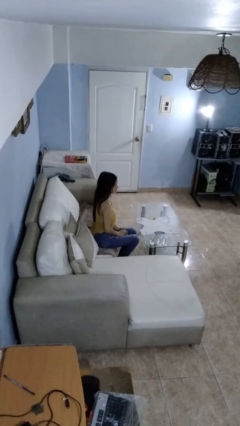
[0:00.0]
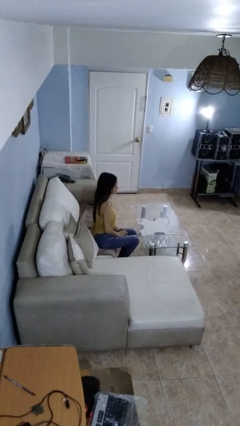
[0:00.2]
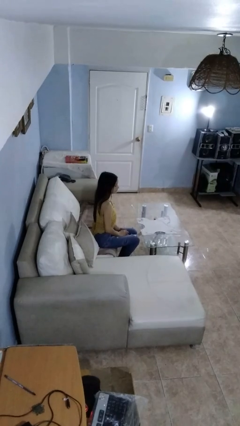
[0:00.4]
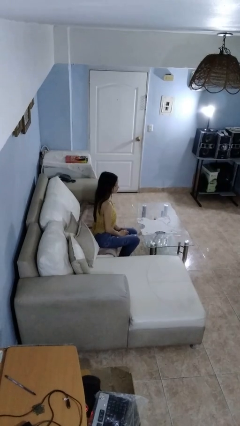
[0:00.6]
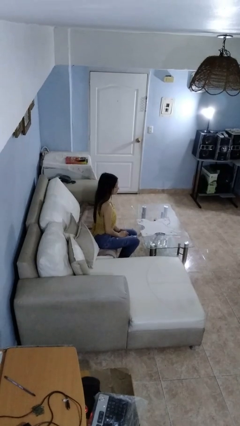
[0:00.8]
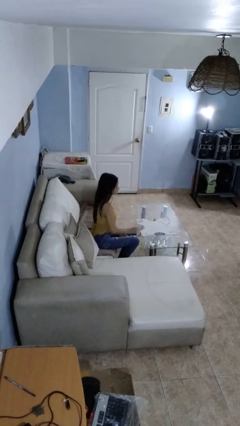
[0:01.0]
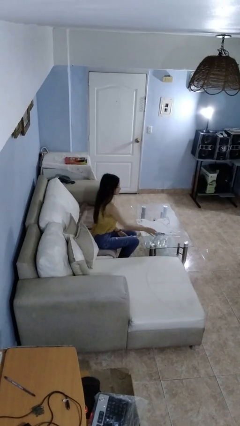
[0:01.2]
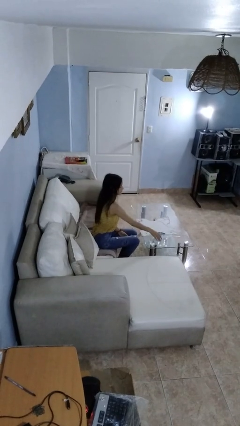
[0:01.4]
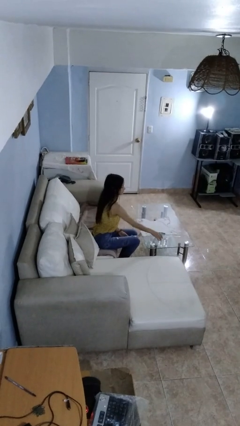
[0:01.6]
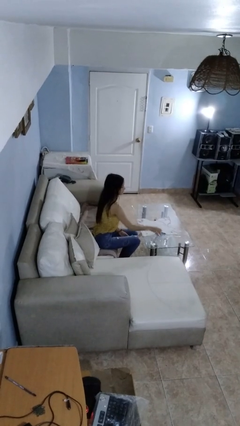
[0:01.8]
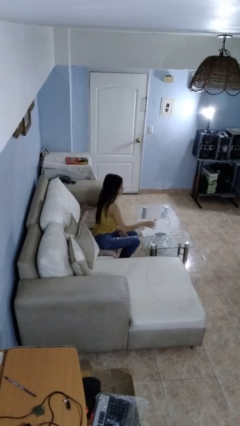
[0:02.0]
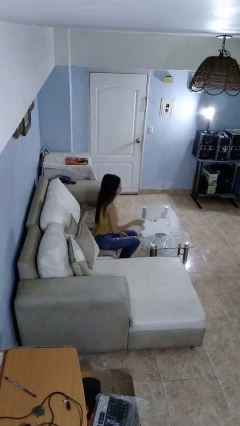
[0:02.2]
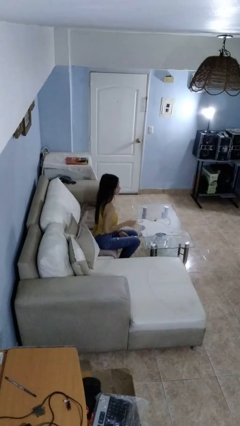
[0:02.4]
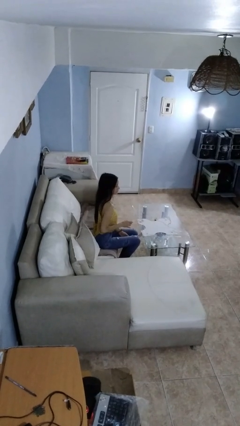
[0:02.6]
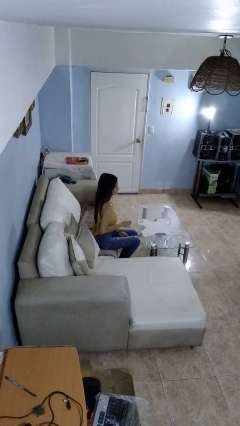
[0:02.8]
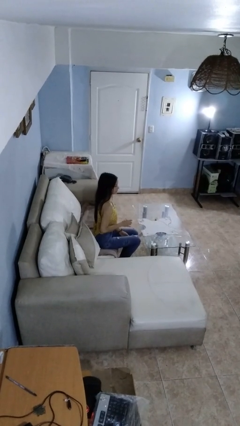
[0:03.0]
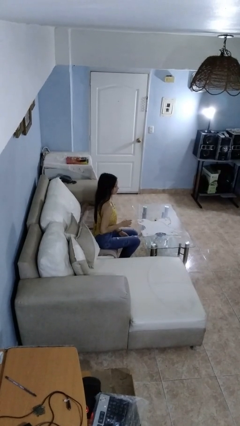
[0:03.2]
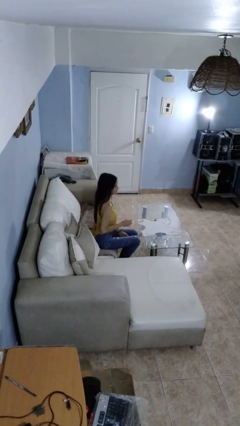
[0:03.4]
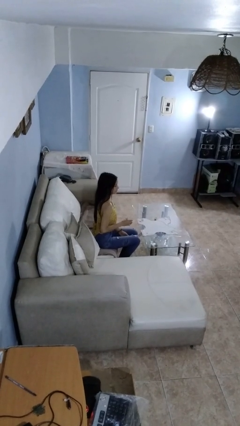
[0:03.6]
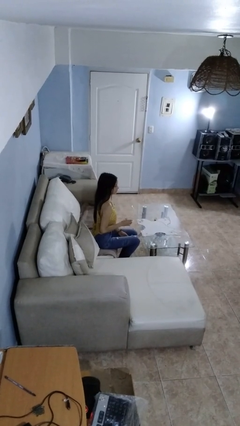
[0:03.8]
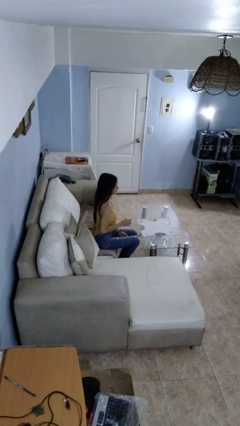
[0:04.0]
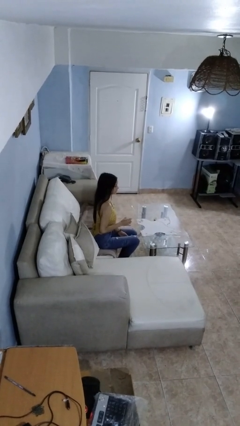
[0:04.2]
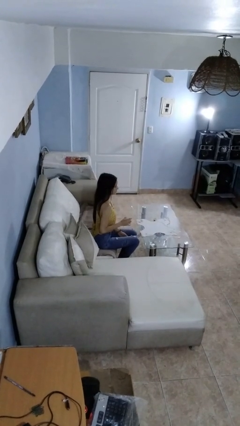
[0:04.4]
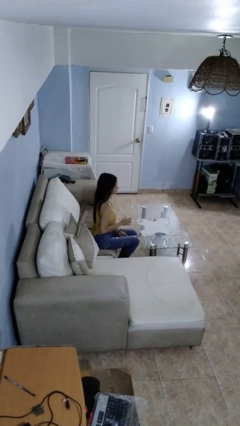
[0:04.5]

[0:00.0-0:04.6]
person picks up object from table

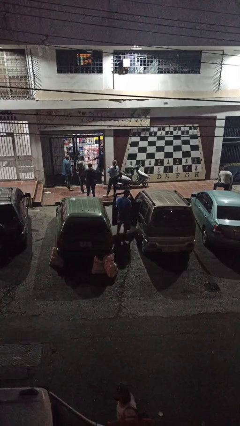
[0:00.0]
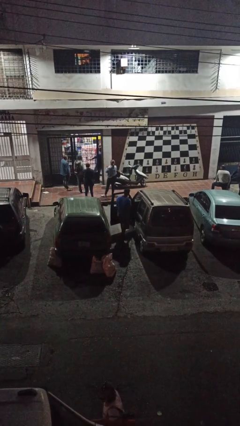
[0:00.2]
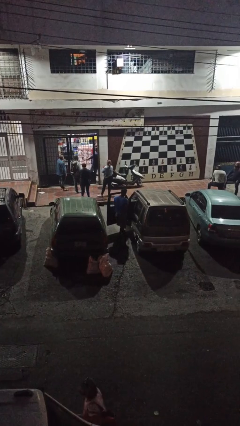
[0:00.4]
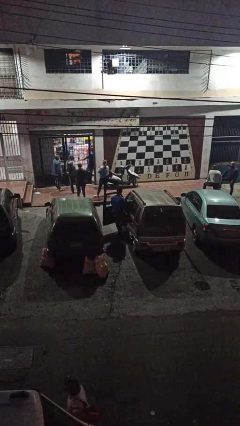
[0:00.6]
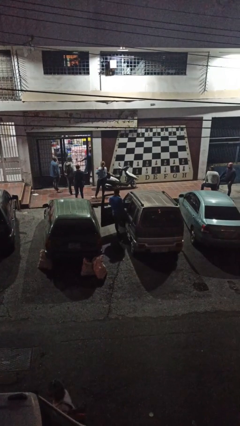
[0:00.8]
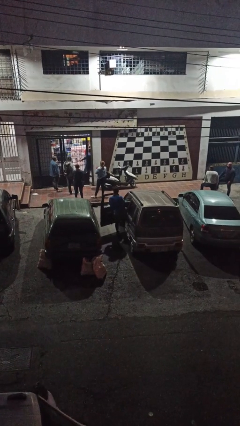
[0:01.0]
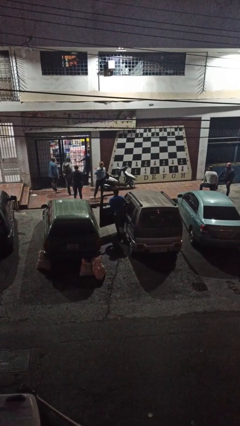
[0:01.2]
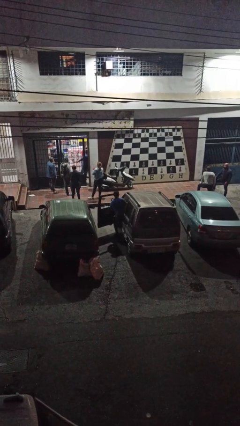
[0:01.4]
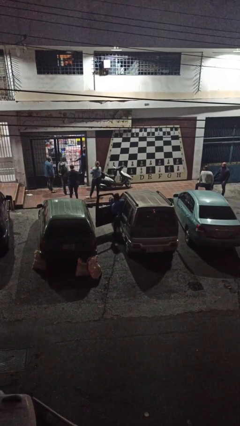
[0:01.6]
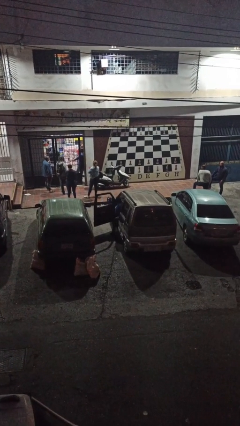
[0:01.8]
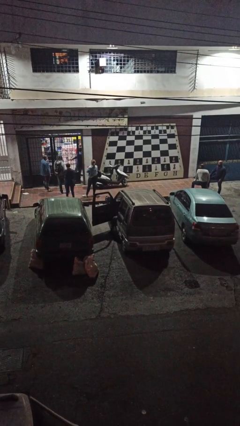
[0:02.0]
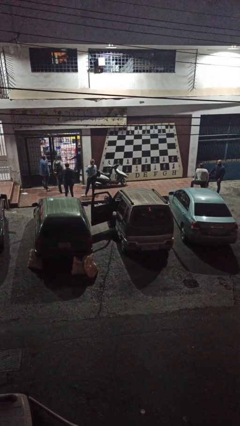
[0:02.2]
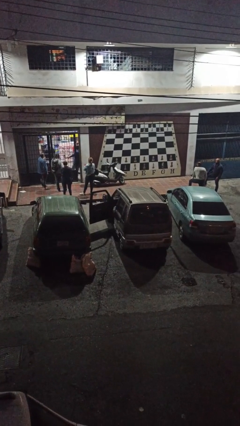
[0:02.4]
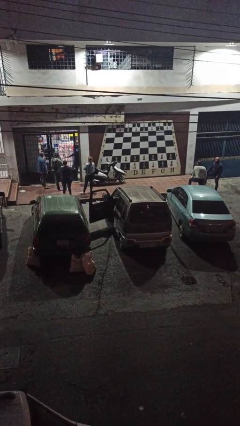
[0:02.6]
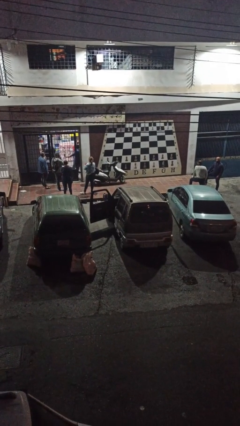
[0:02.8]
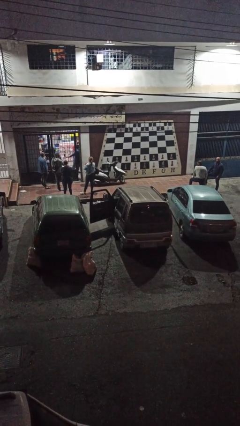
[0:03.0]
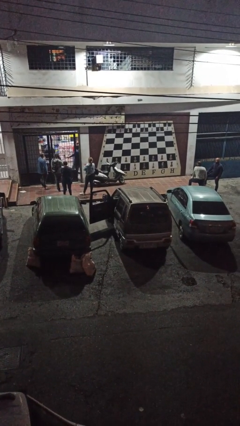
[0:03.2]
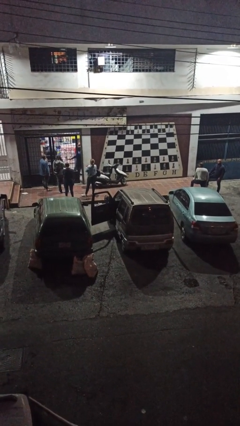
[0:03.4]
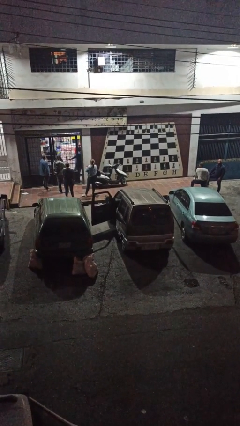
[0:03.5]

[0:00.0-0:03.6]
person enters car

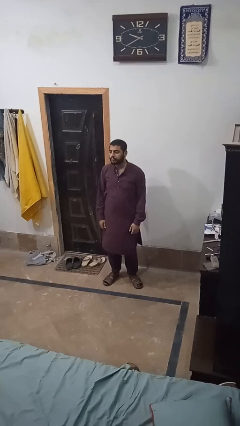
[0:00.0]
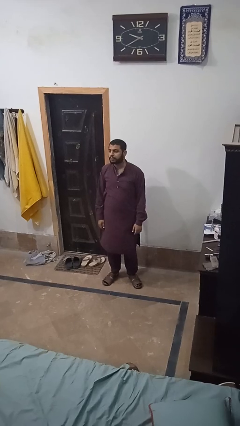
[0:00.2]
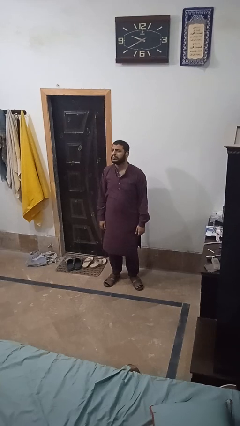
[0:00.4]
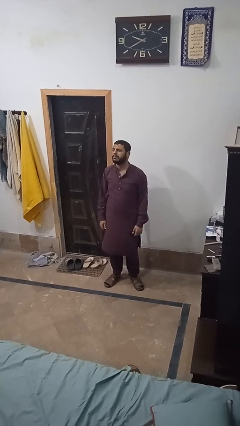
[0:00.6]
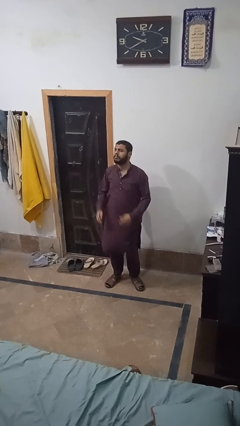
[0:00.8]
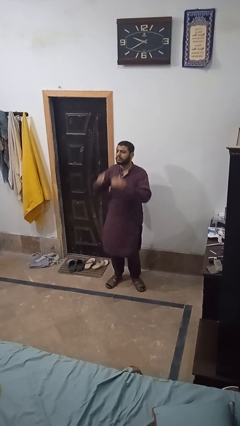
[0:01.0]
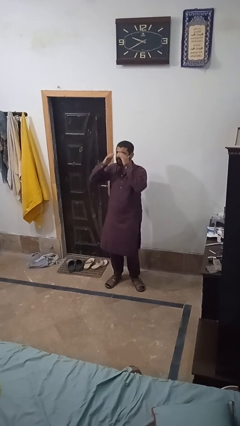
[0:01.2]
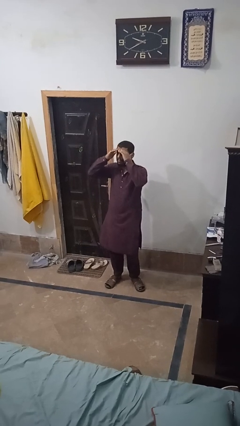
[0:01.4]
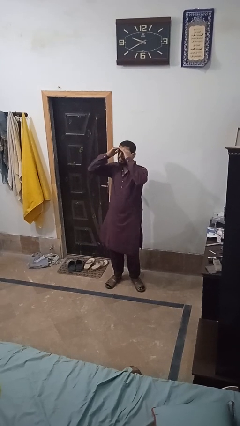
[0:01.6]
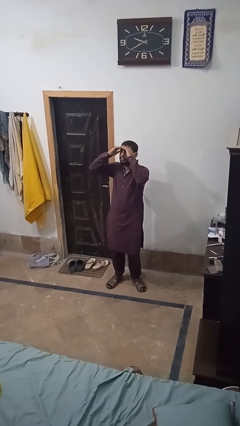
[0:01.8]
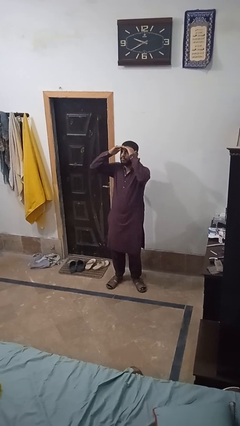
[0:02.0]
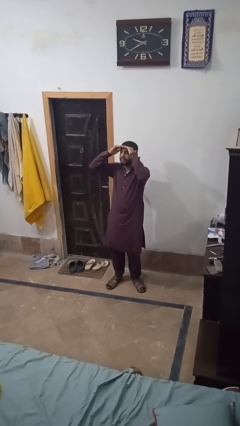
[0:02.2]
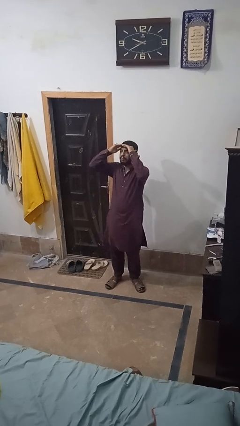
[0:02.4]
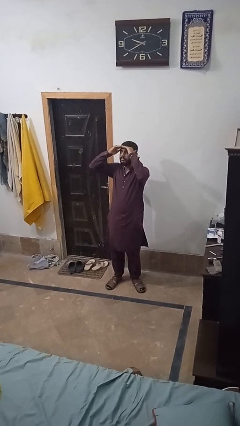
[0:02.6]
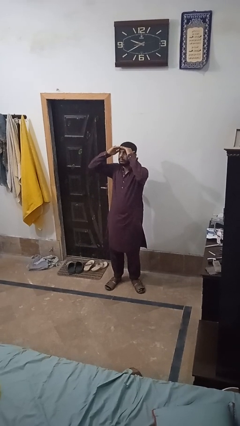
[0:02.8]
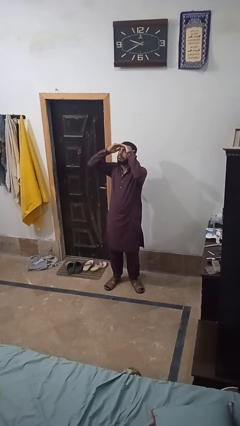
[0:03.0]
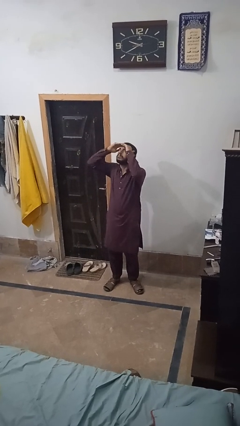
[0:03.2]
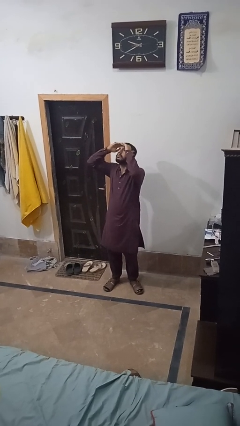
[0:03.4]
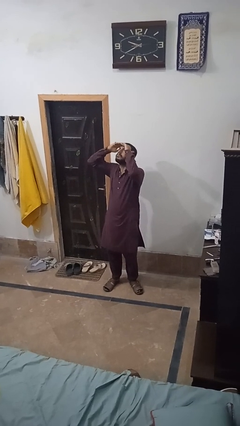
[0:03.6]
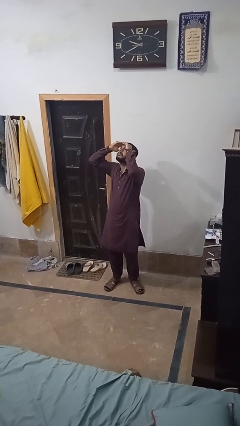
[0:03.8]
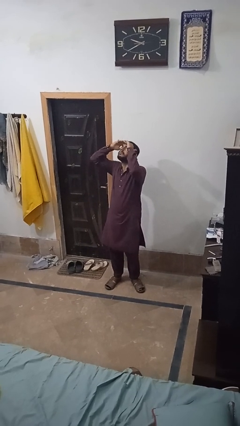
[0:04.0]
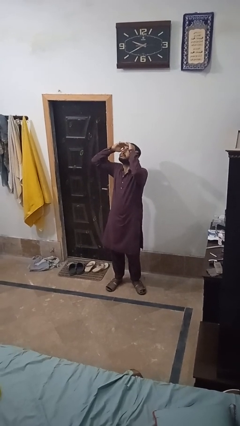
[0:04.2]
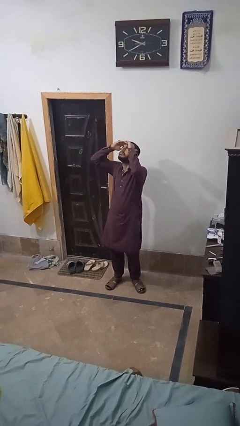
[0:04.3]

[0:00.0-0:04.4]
person shades eyes

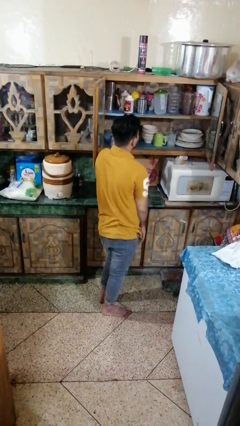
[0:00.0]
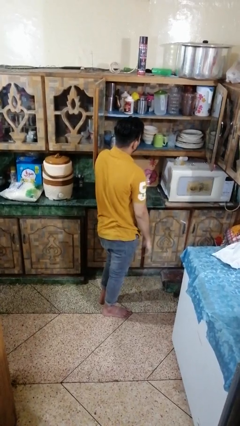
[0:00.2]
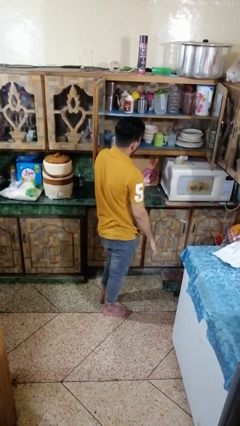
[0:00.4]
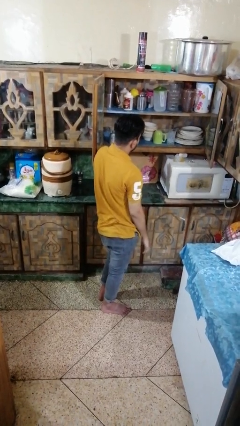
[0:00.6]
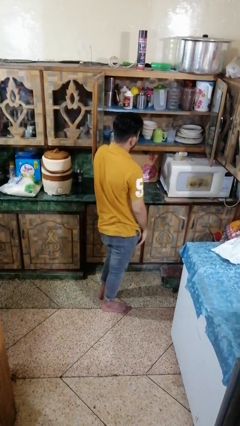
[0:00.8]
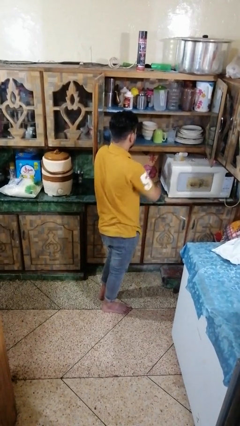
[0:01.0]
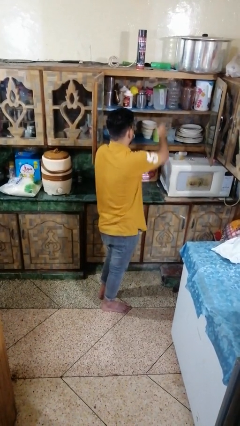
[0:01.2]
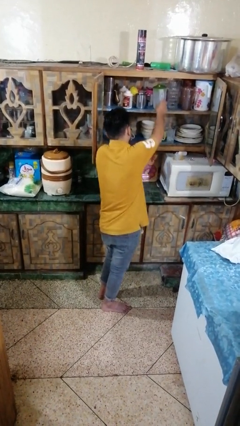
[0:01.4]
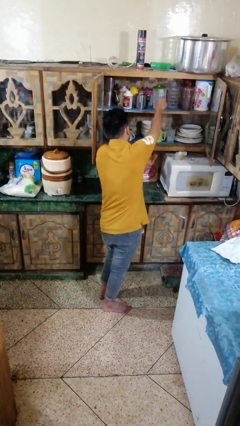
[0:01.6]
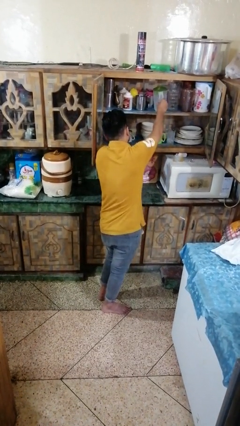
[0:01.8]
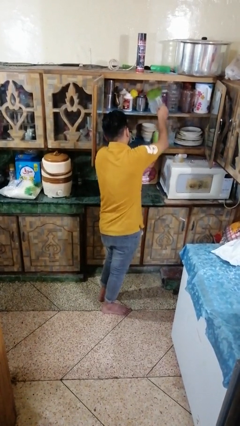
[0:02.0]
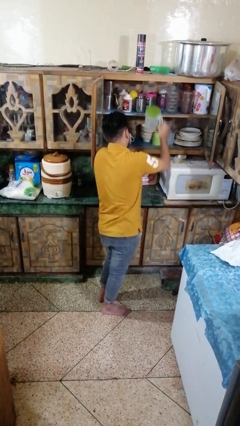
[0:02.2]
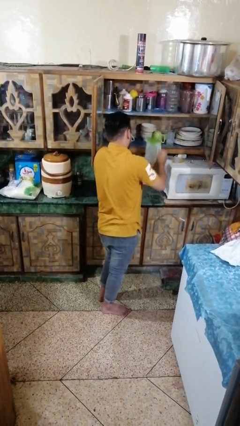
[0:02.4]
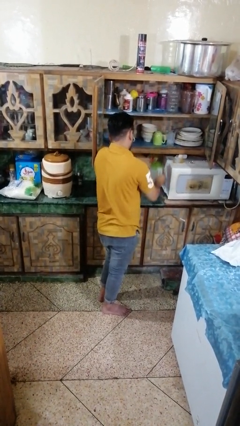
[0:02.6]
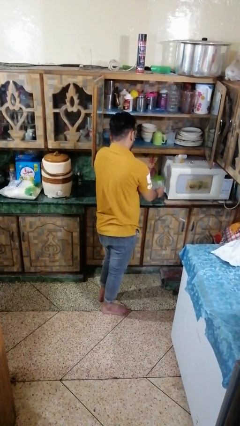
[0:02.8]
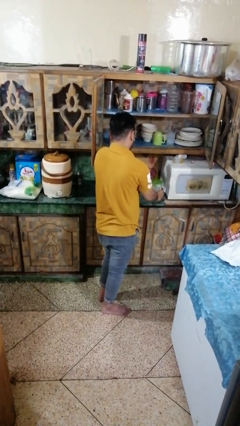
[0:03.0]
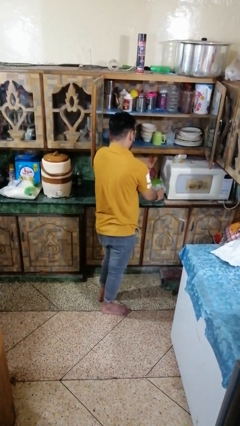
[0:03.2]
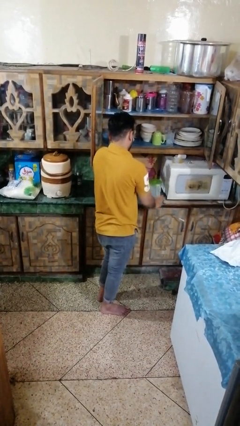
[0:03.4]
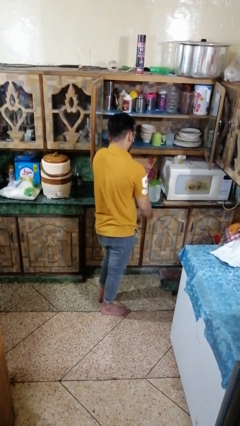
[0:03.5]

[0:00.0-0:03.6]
person takes object from cabinet

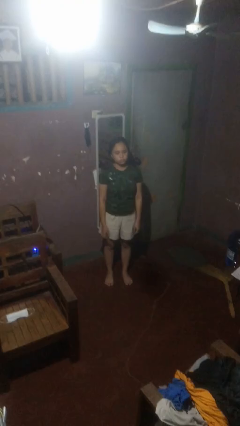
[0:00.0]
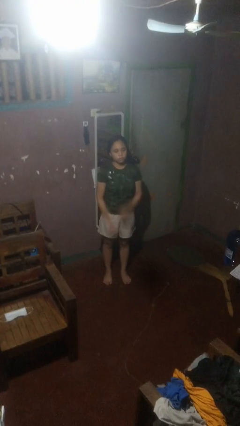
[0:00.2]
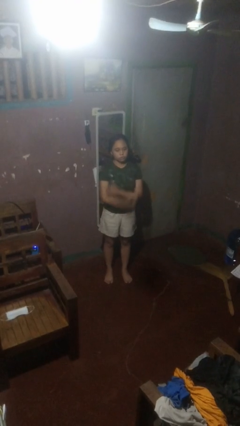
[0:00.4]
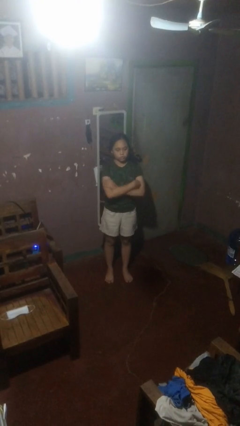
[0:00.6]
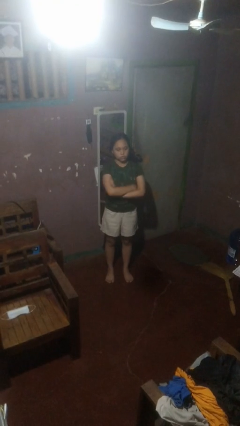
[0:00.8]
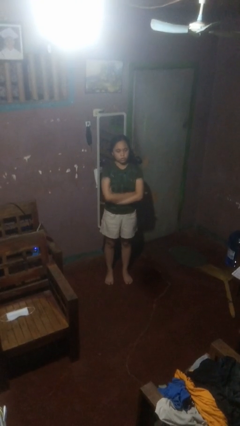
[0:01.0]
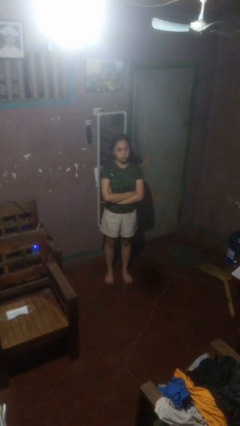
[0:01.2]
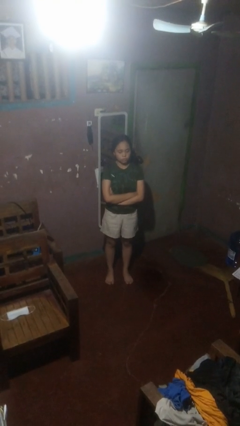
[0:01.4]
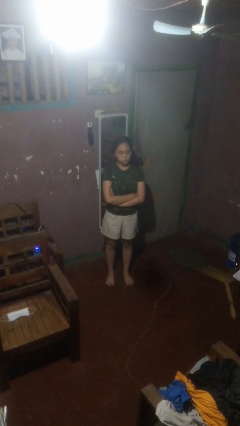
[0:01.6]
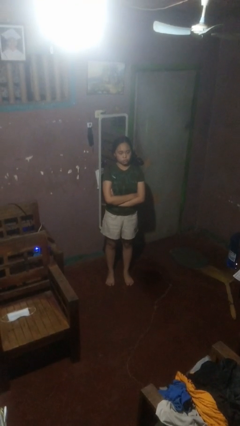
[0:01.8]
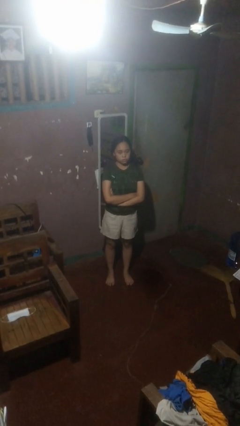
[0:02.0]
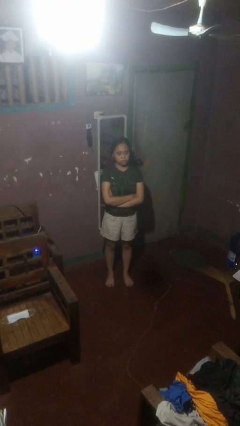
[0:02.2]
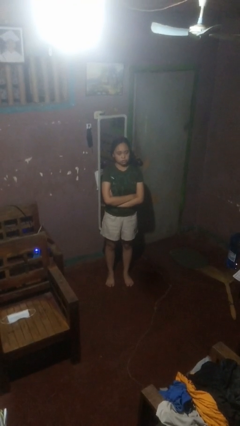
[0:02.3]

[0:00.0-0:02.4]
person crosses arms
